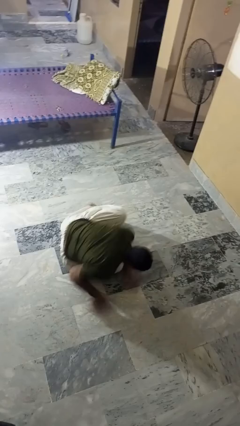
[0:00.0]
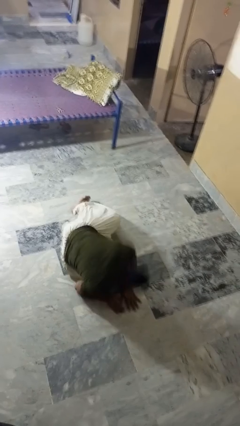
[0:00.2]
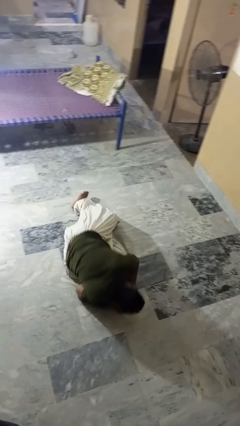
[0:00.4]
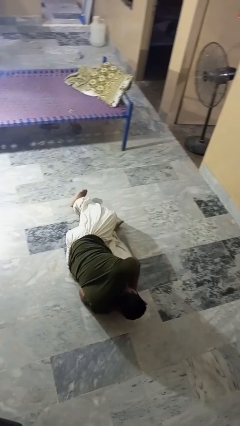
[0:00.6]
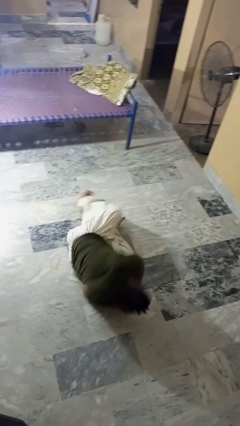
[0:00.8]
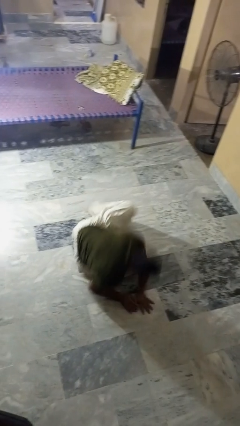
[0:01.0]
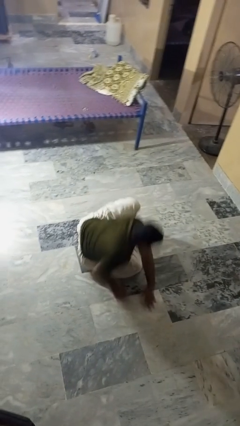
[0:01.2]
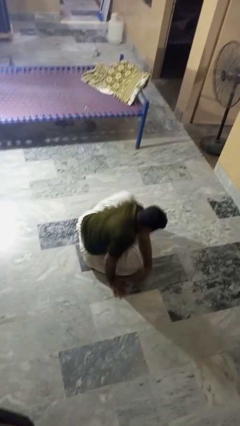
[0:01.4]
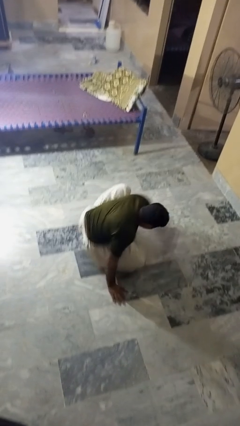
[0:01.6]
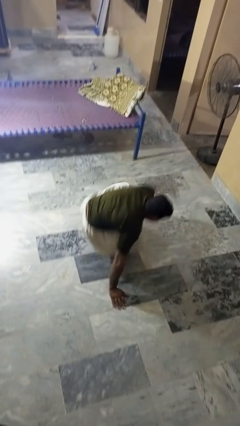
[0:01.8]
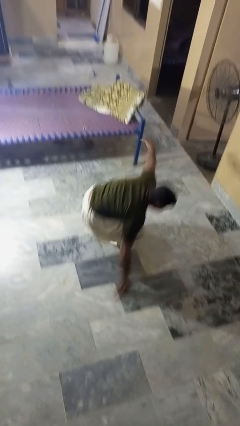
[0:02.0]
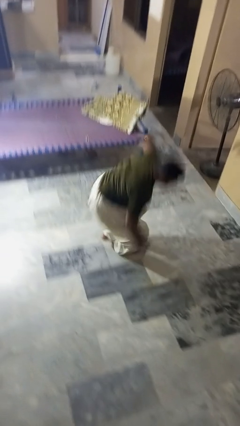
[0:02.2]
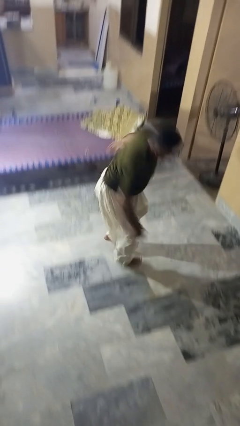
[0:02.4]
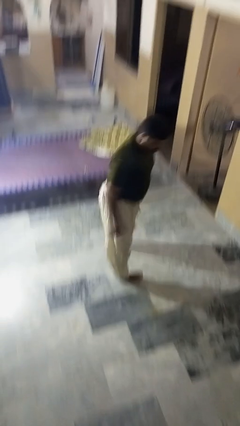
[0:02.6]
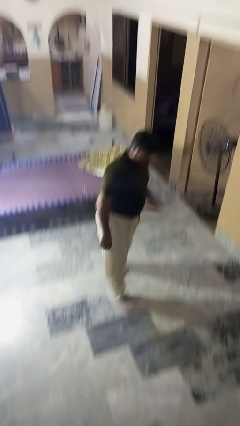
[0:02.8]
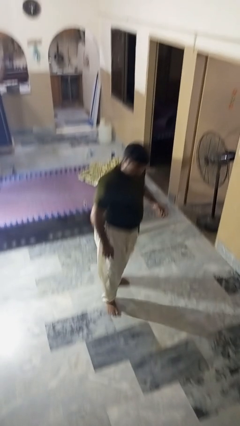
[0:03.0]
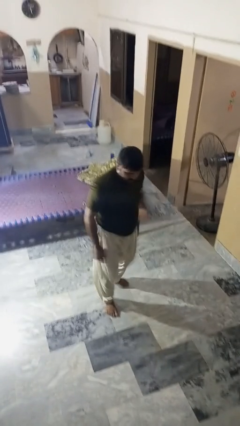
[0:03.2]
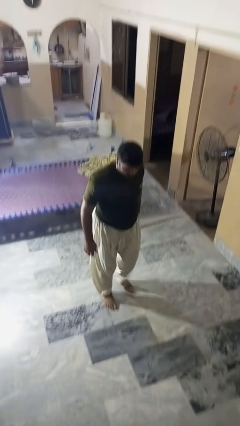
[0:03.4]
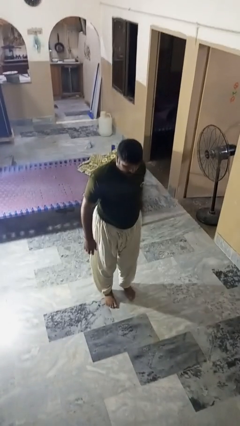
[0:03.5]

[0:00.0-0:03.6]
person stands up from floor

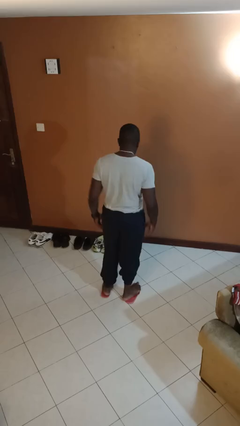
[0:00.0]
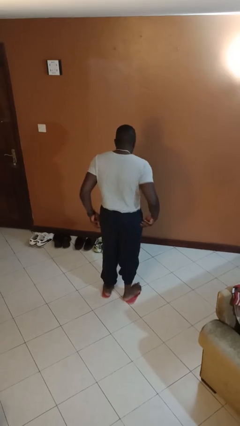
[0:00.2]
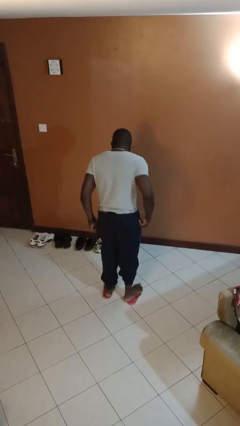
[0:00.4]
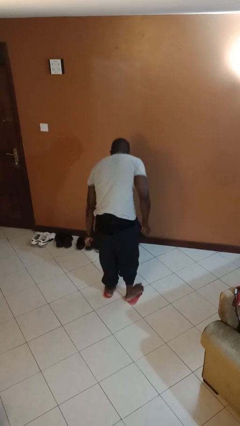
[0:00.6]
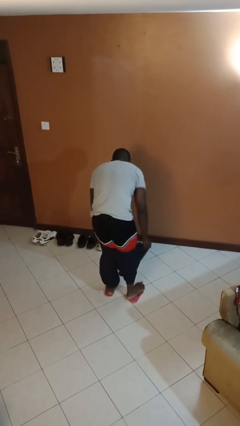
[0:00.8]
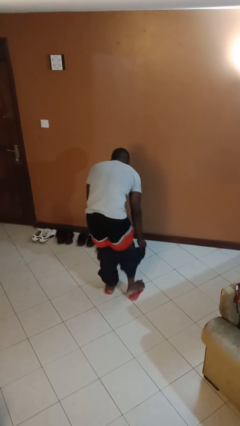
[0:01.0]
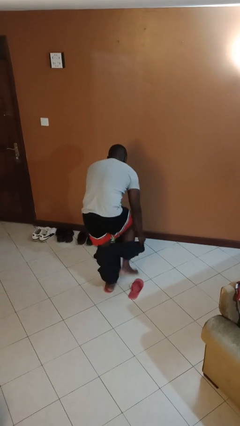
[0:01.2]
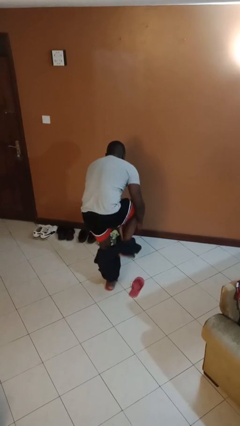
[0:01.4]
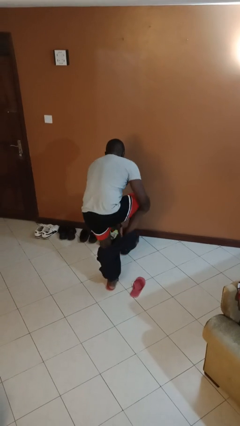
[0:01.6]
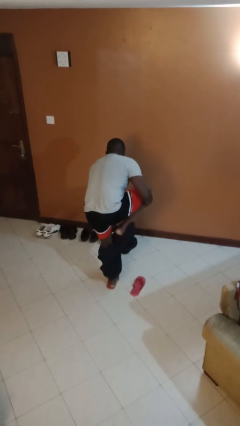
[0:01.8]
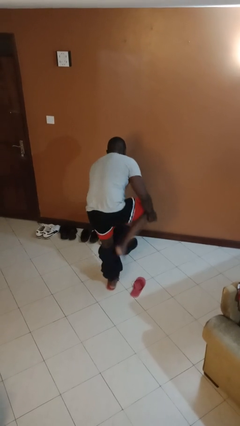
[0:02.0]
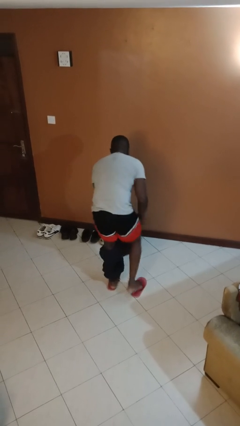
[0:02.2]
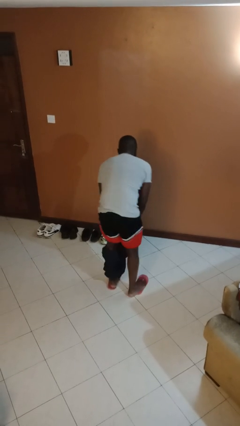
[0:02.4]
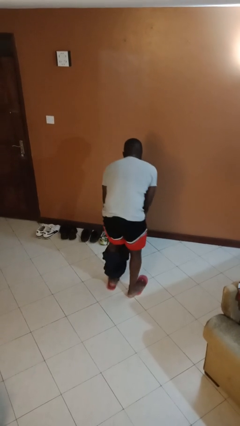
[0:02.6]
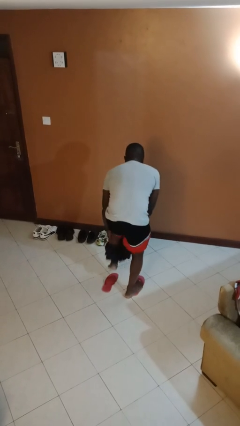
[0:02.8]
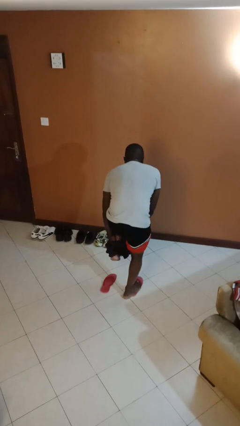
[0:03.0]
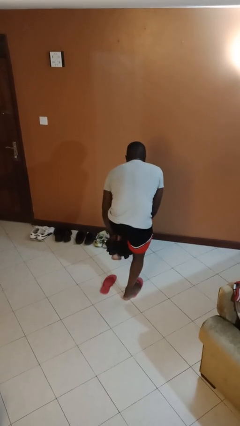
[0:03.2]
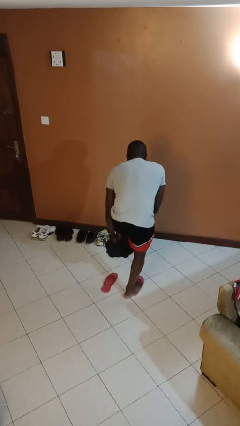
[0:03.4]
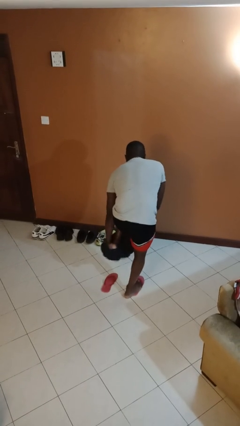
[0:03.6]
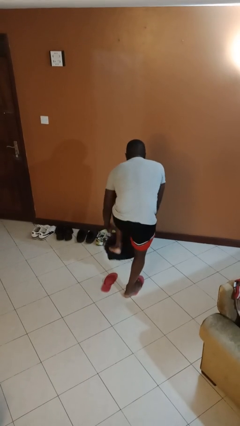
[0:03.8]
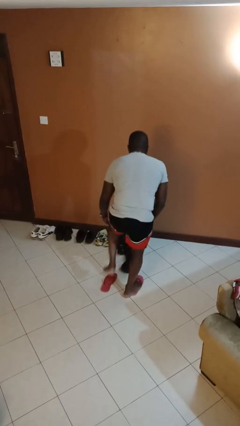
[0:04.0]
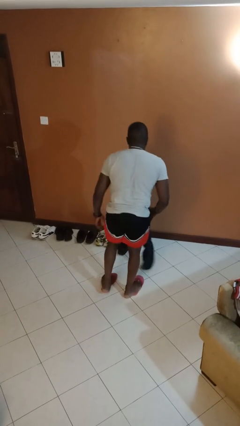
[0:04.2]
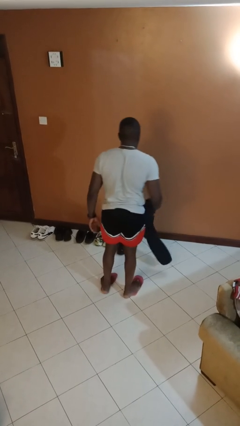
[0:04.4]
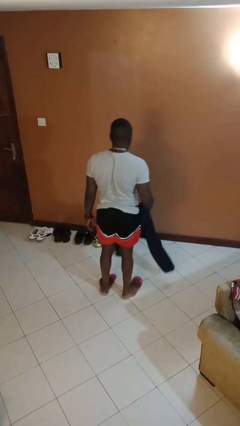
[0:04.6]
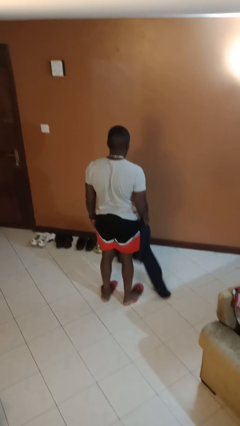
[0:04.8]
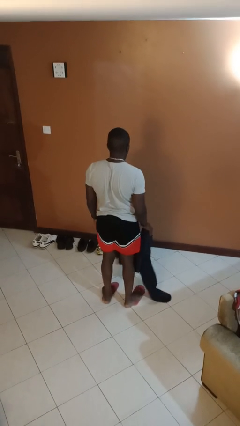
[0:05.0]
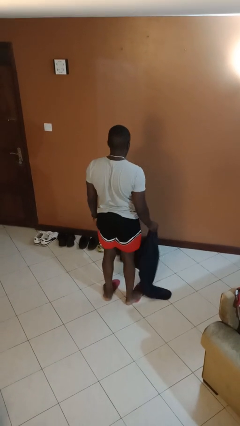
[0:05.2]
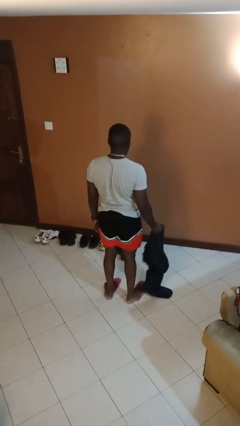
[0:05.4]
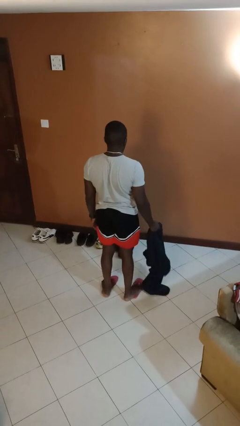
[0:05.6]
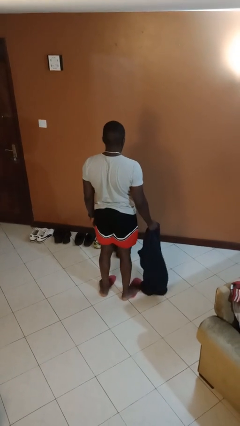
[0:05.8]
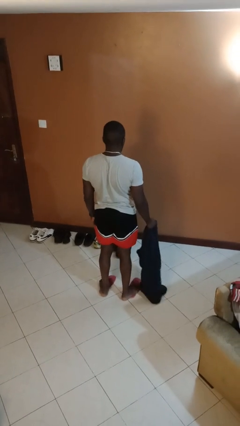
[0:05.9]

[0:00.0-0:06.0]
person takes off pants

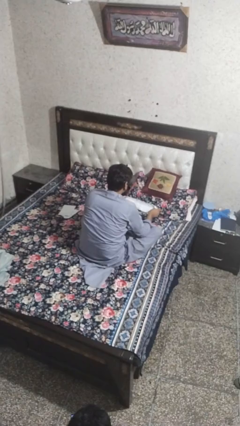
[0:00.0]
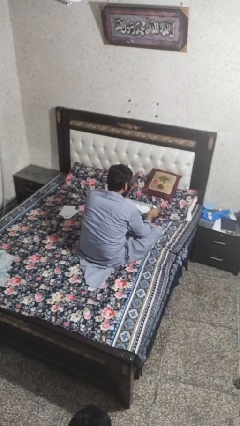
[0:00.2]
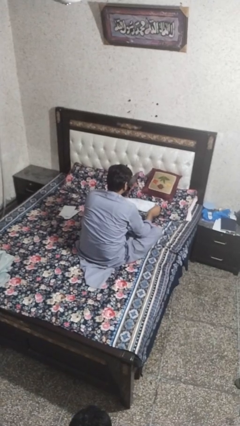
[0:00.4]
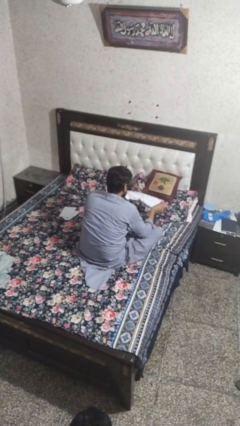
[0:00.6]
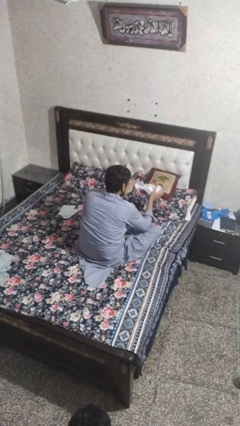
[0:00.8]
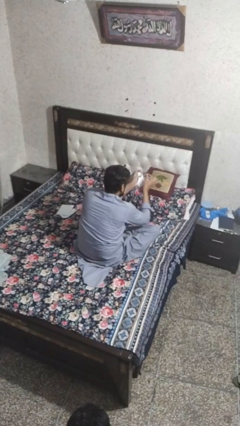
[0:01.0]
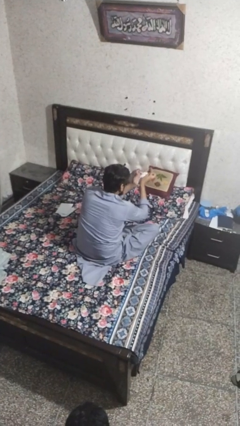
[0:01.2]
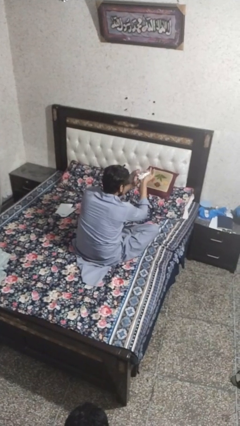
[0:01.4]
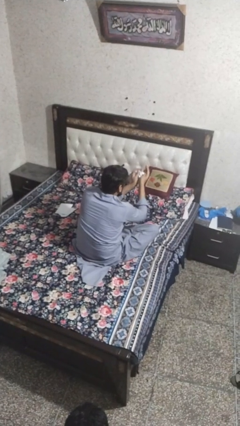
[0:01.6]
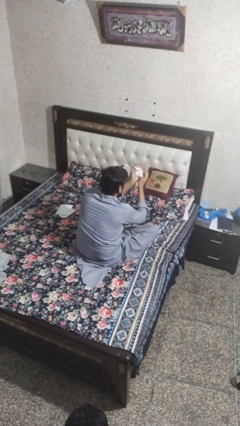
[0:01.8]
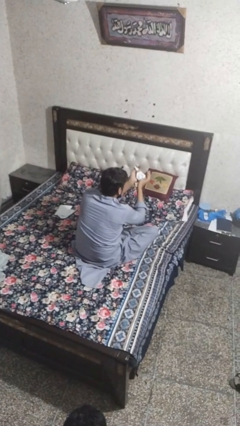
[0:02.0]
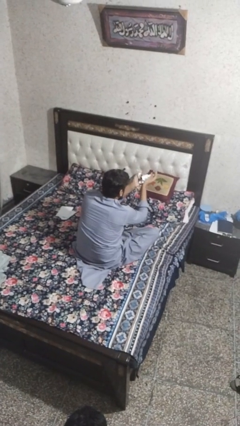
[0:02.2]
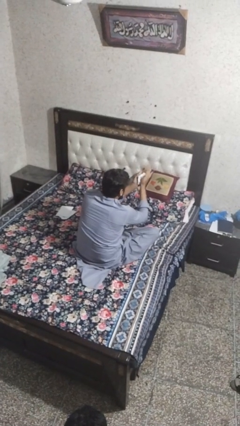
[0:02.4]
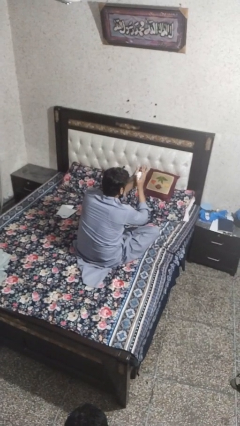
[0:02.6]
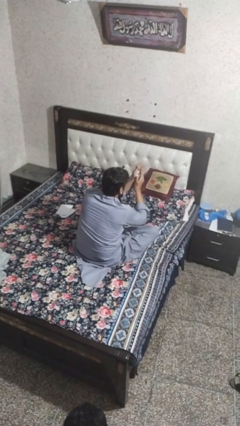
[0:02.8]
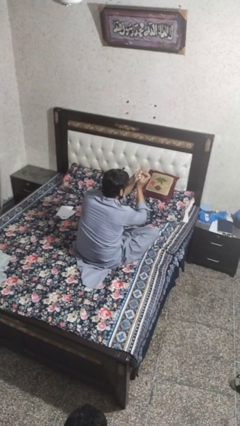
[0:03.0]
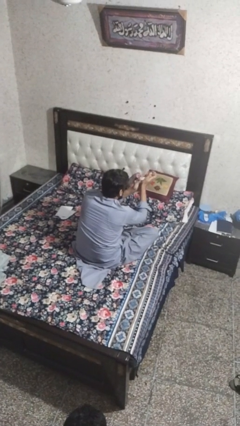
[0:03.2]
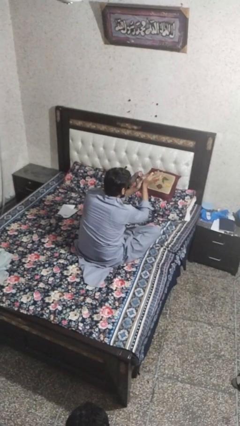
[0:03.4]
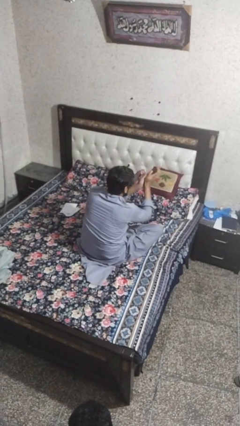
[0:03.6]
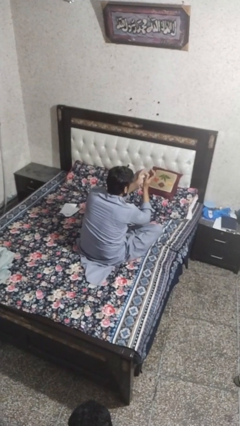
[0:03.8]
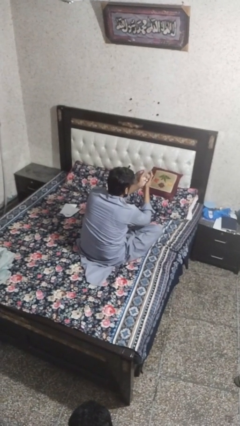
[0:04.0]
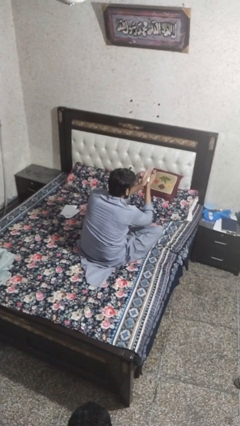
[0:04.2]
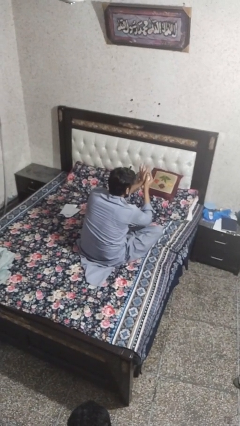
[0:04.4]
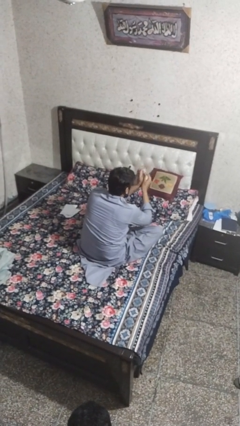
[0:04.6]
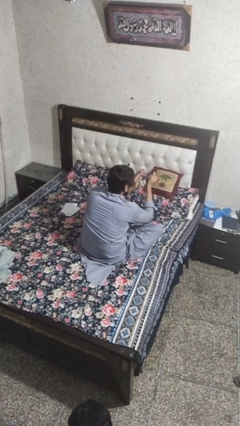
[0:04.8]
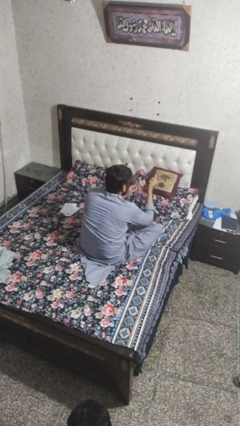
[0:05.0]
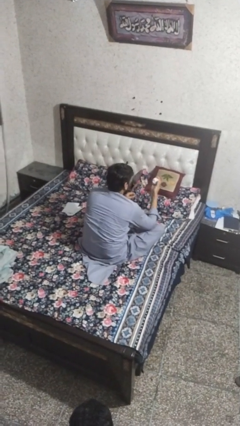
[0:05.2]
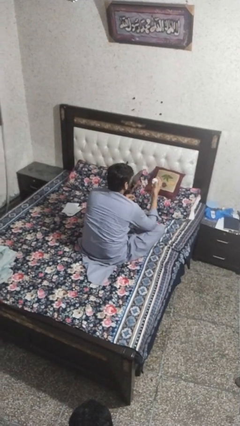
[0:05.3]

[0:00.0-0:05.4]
person crumples paper

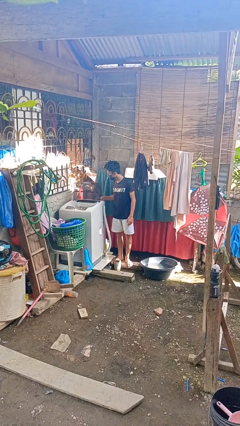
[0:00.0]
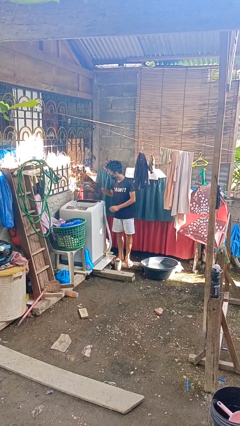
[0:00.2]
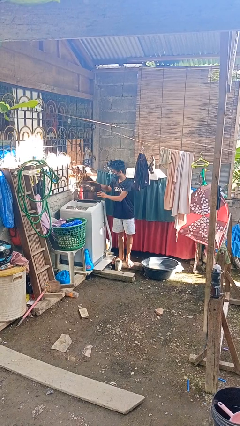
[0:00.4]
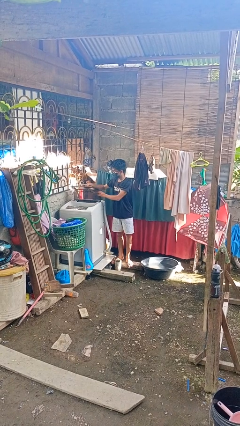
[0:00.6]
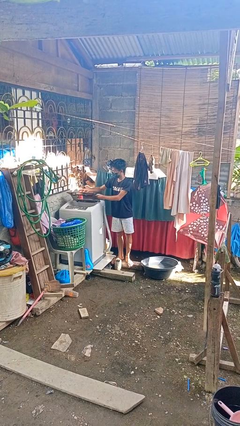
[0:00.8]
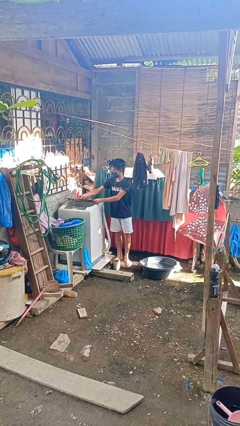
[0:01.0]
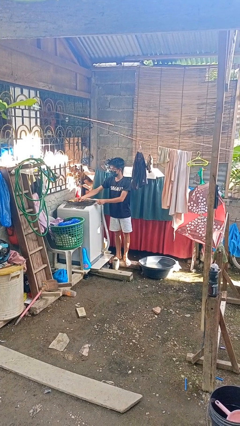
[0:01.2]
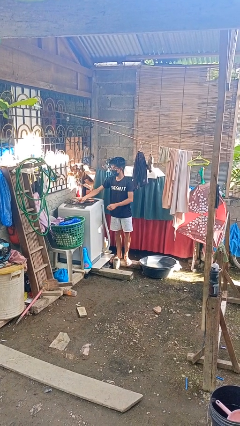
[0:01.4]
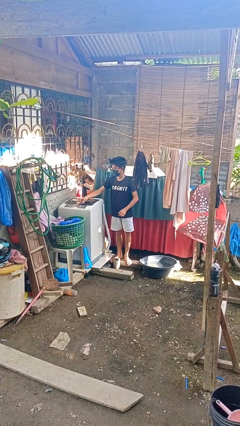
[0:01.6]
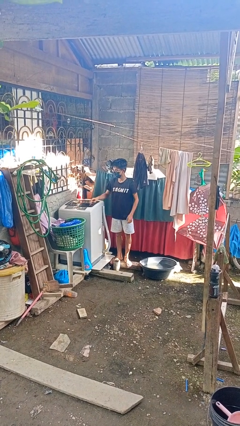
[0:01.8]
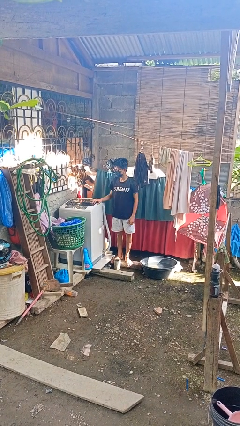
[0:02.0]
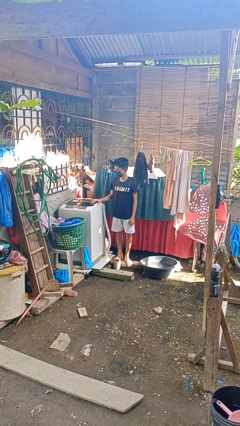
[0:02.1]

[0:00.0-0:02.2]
person closes clothes washer

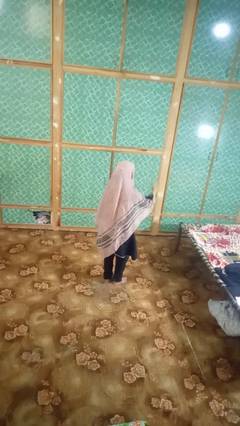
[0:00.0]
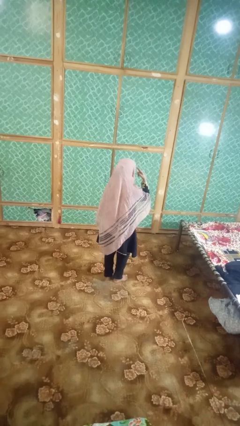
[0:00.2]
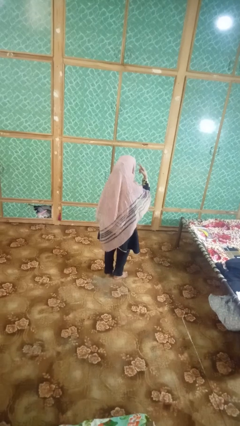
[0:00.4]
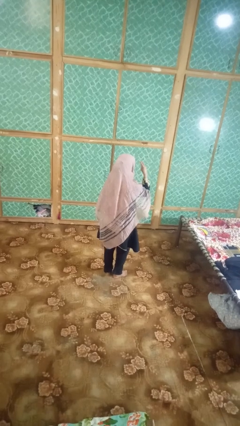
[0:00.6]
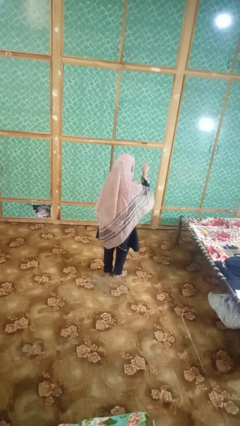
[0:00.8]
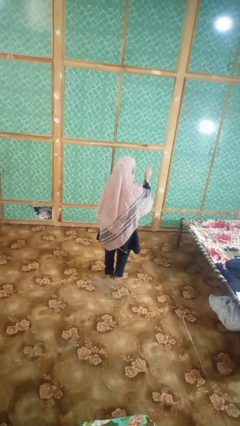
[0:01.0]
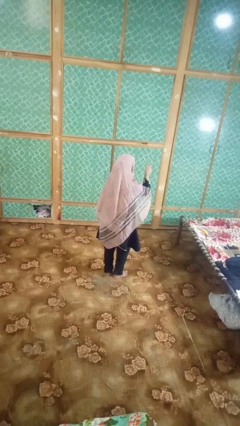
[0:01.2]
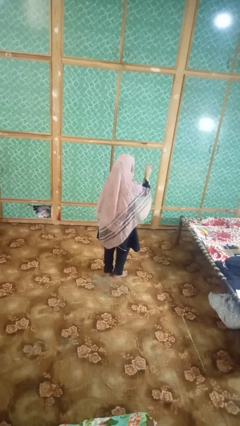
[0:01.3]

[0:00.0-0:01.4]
person gestures behind me
